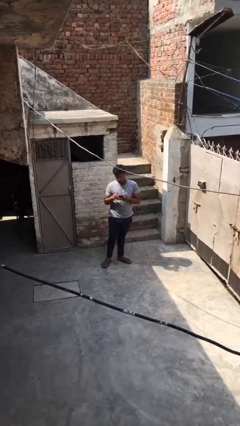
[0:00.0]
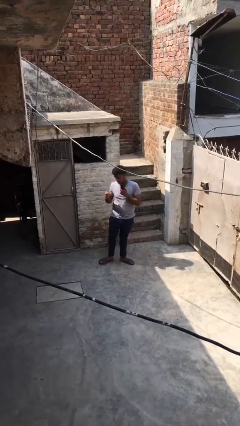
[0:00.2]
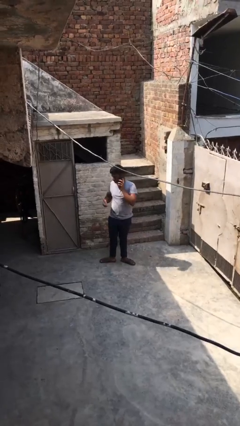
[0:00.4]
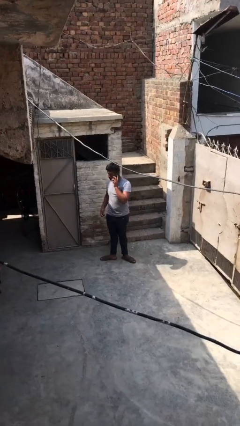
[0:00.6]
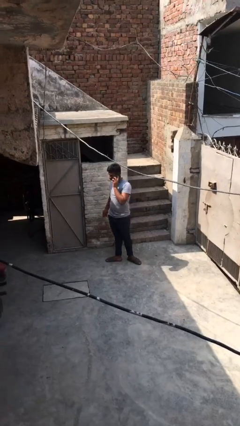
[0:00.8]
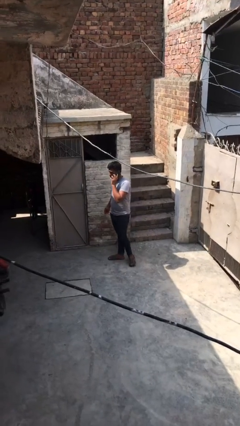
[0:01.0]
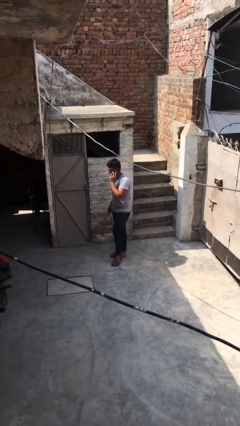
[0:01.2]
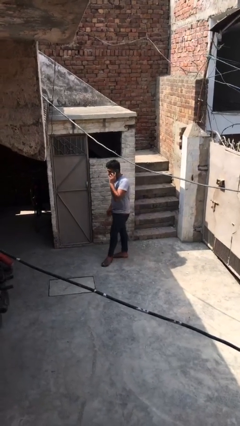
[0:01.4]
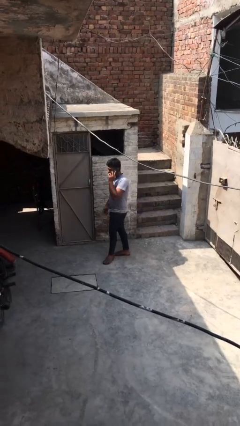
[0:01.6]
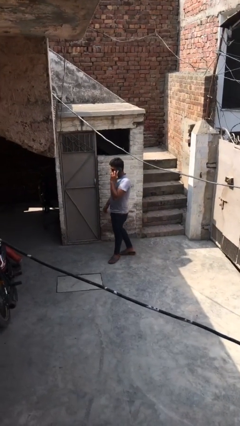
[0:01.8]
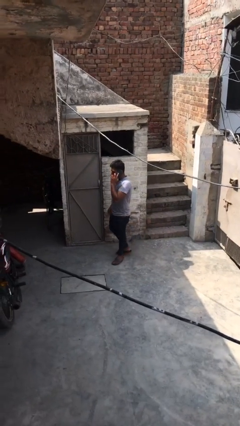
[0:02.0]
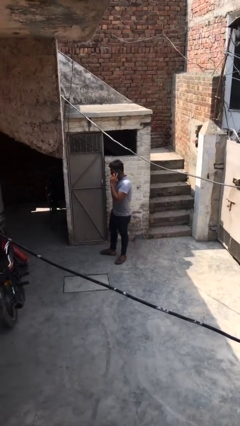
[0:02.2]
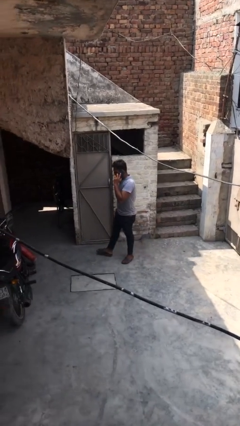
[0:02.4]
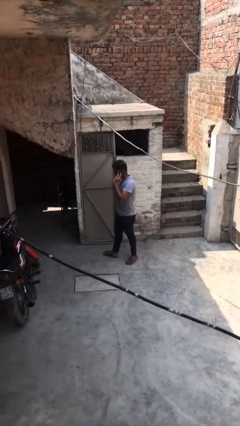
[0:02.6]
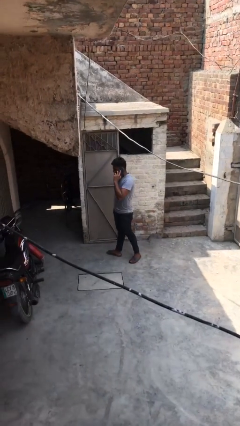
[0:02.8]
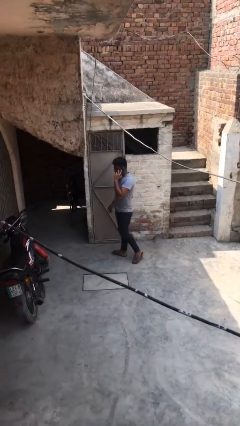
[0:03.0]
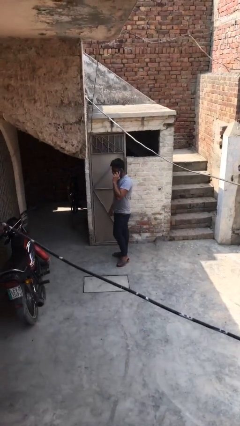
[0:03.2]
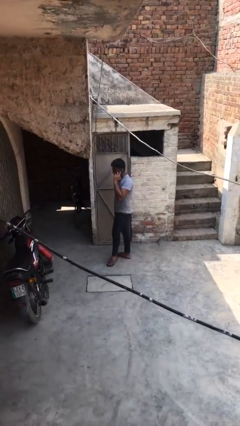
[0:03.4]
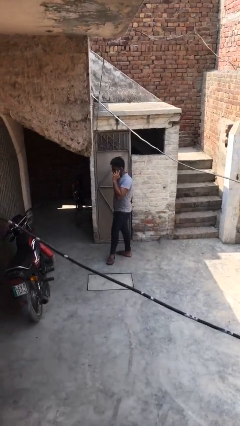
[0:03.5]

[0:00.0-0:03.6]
person talks on phone

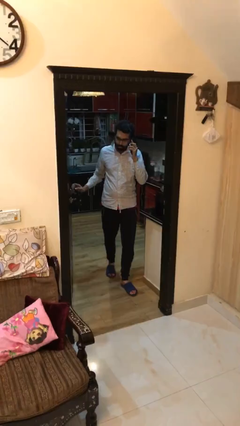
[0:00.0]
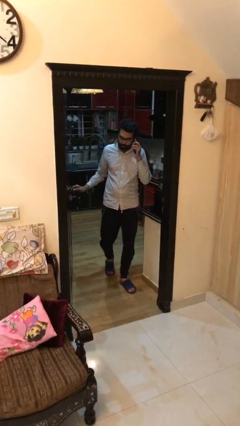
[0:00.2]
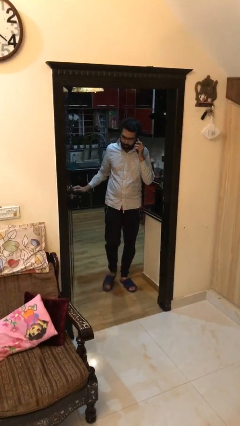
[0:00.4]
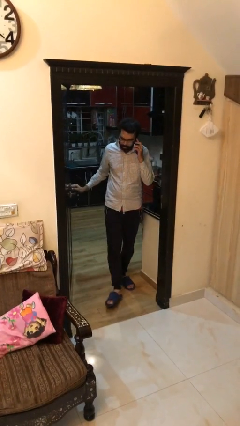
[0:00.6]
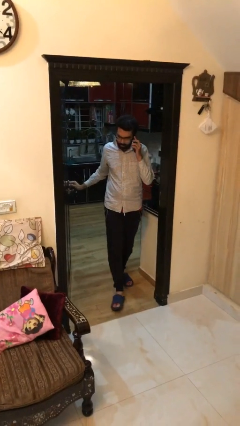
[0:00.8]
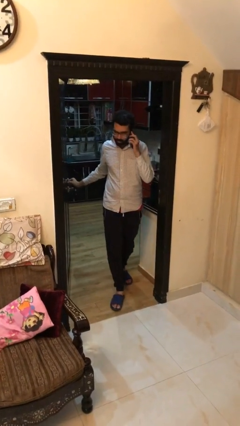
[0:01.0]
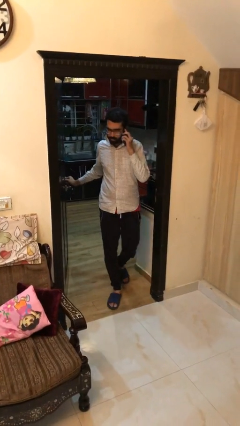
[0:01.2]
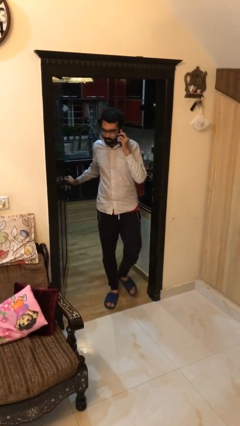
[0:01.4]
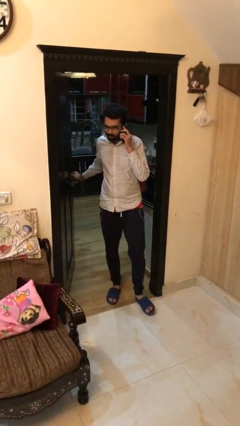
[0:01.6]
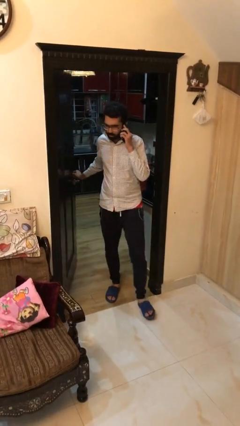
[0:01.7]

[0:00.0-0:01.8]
person enters scene through structure

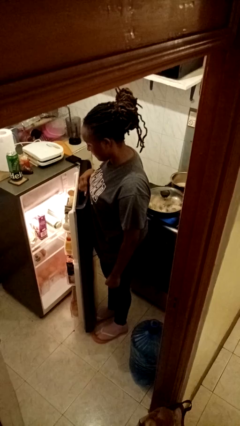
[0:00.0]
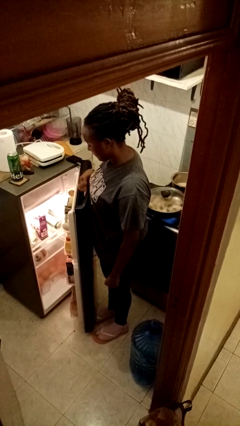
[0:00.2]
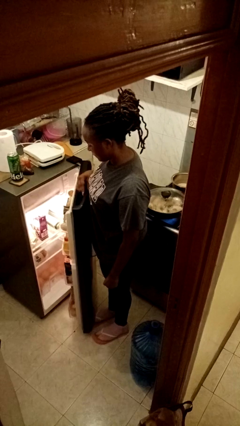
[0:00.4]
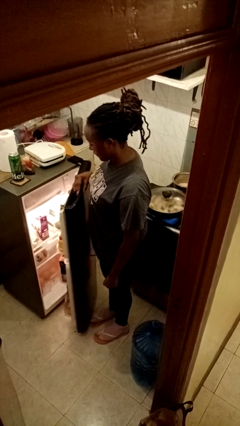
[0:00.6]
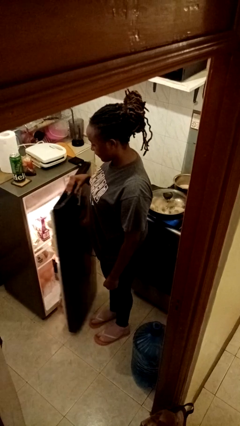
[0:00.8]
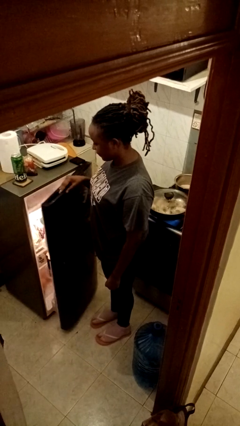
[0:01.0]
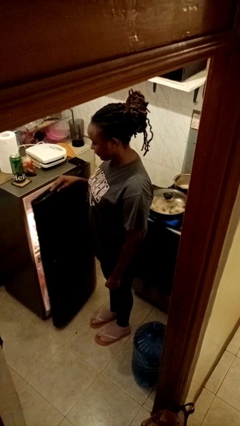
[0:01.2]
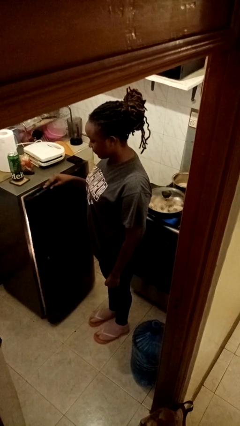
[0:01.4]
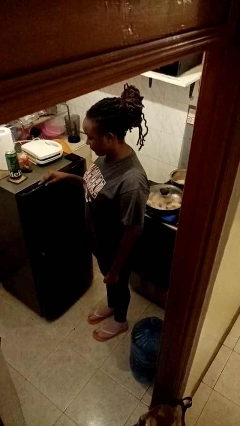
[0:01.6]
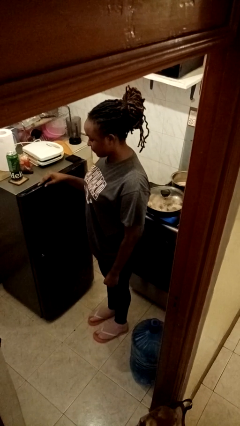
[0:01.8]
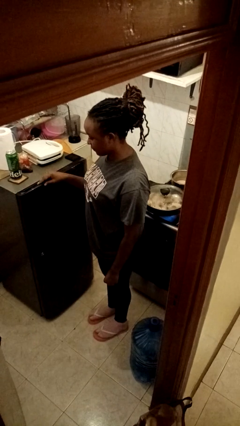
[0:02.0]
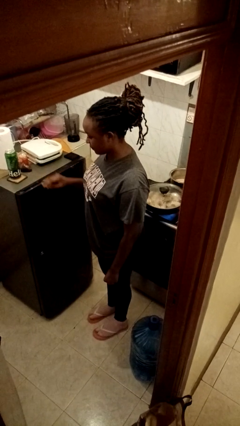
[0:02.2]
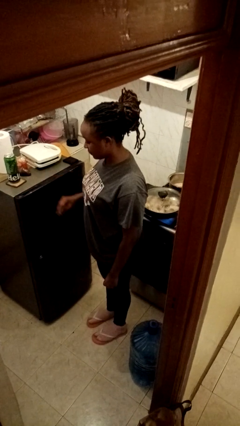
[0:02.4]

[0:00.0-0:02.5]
person closes refrigerator

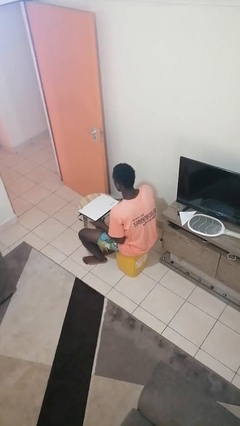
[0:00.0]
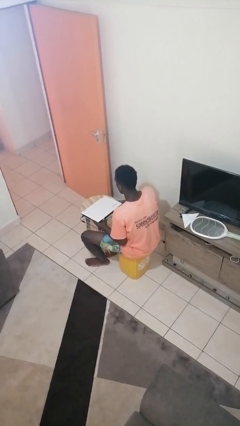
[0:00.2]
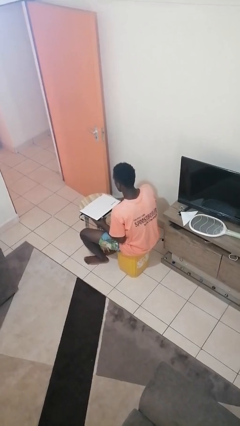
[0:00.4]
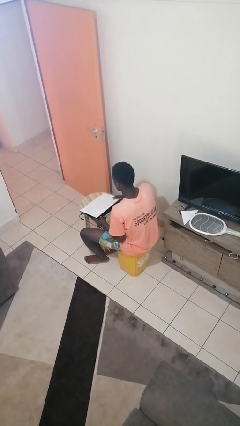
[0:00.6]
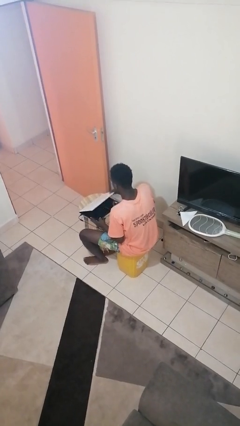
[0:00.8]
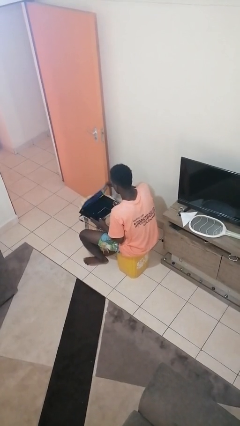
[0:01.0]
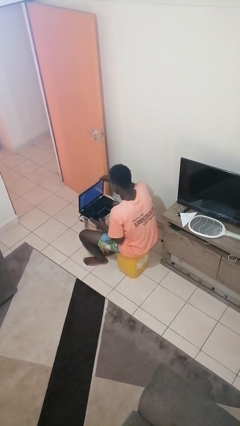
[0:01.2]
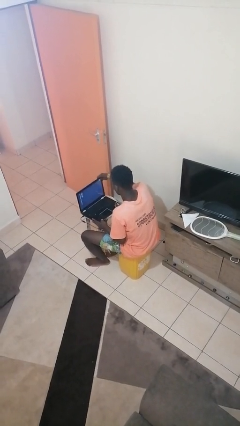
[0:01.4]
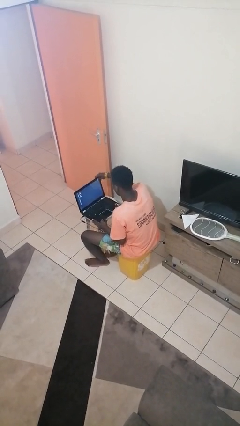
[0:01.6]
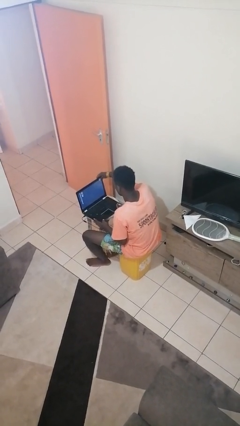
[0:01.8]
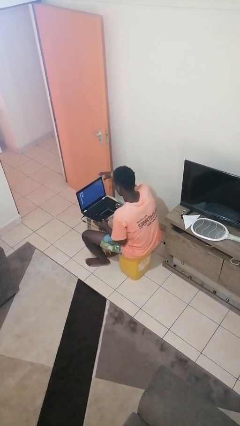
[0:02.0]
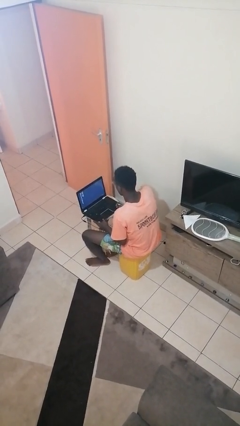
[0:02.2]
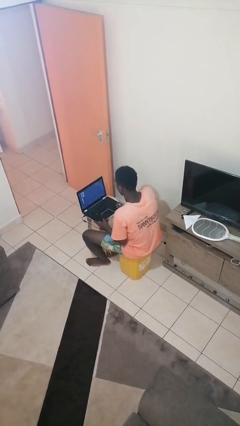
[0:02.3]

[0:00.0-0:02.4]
person opens laptop

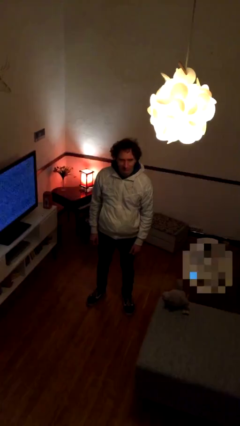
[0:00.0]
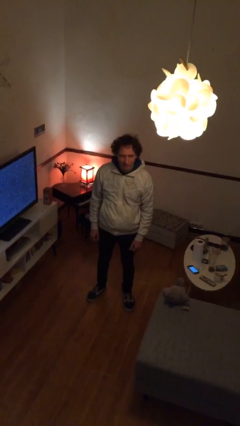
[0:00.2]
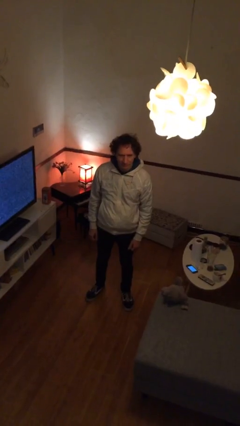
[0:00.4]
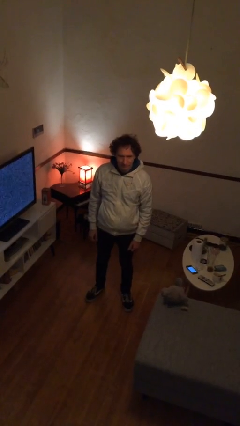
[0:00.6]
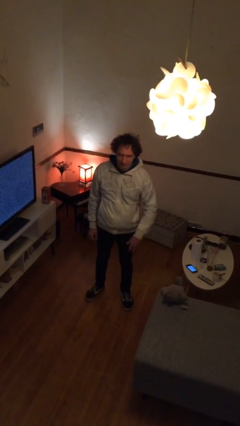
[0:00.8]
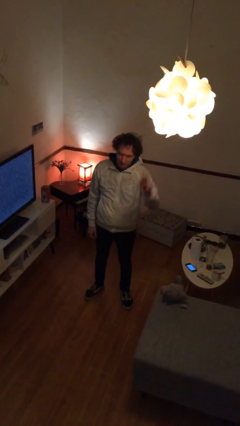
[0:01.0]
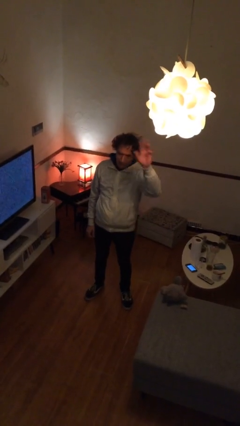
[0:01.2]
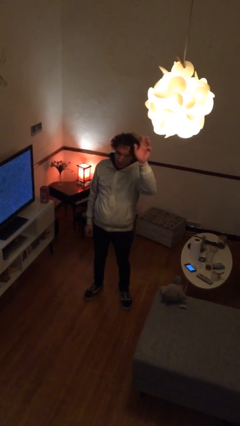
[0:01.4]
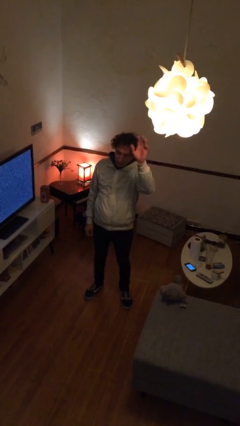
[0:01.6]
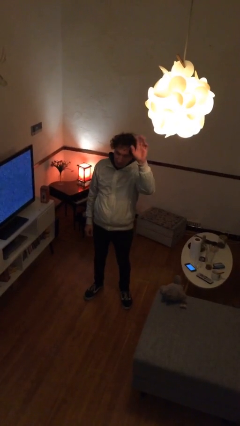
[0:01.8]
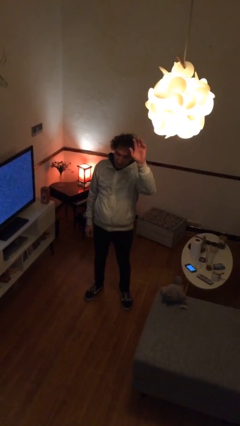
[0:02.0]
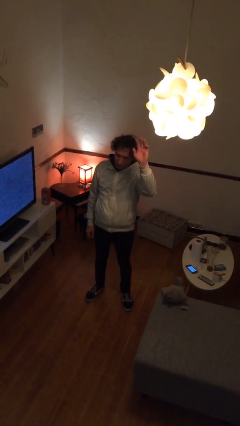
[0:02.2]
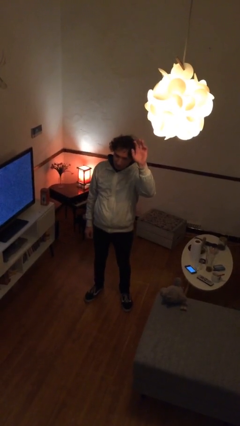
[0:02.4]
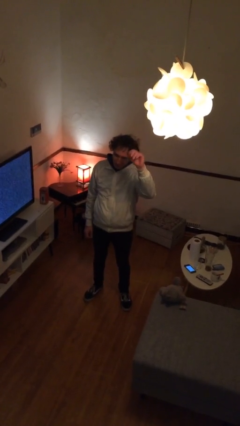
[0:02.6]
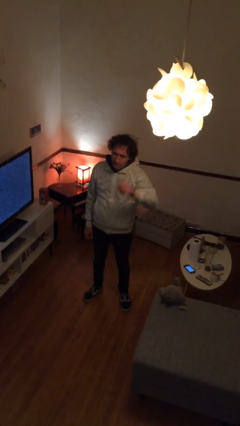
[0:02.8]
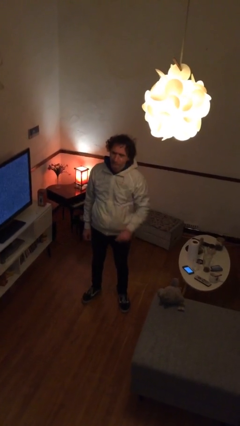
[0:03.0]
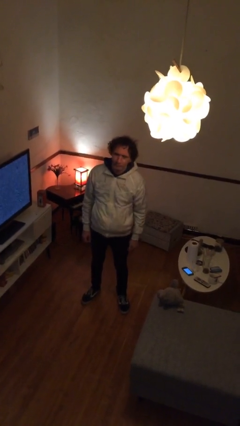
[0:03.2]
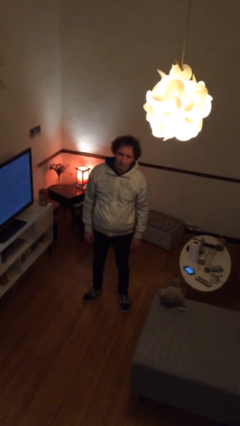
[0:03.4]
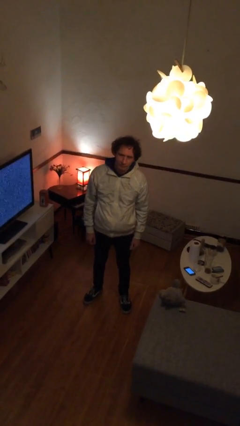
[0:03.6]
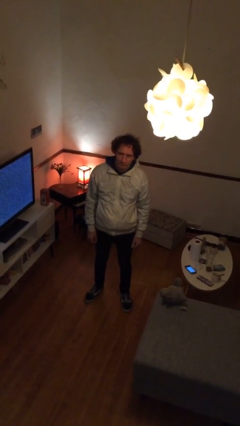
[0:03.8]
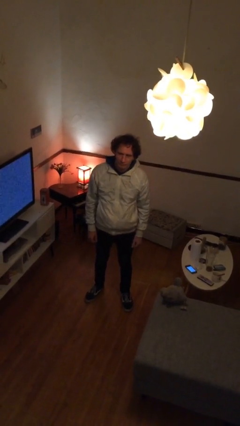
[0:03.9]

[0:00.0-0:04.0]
person waves at person

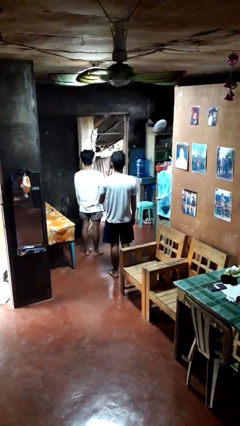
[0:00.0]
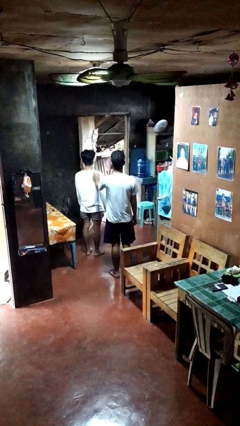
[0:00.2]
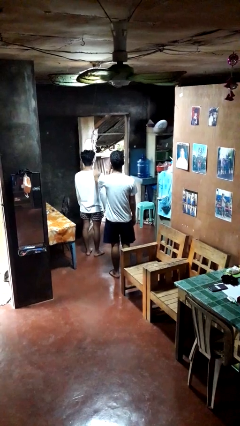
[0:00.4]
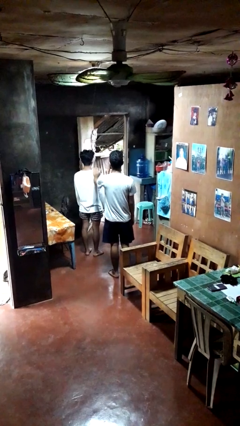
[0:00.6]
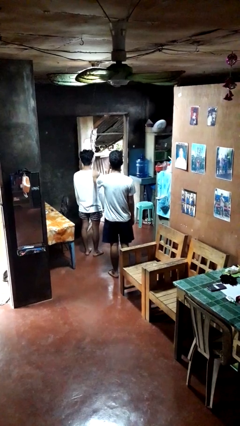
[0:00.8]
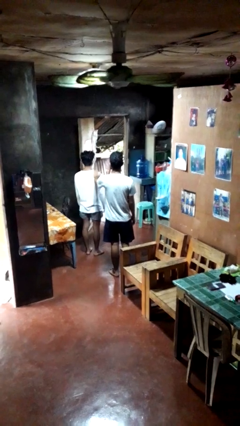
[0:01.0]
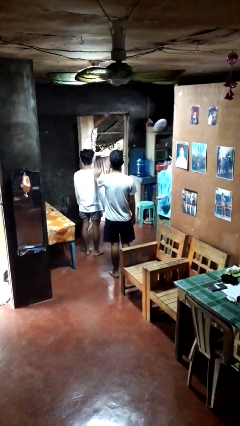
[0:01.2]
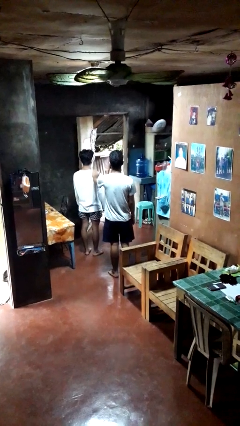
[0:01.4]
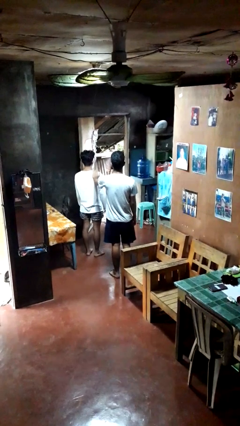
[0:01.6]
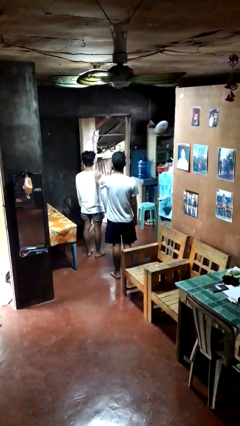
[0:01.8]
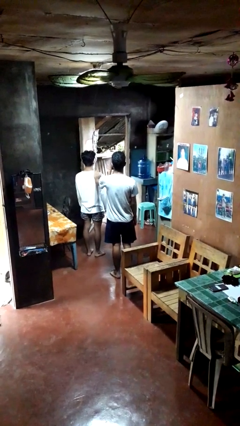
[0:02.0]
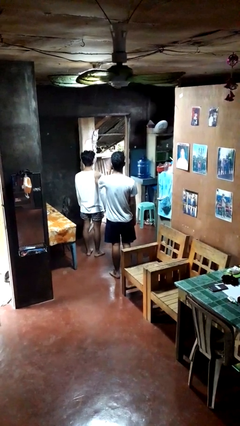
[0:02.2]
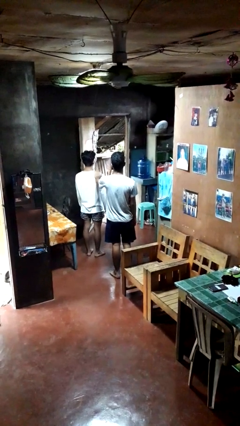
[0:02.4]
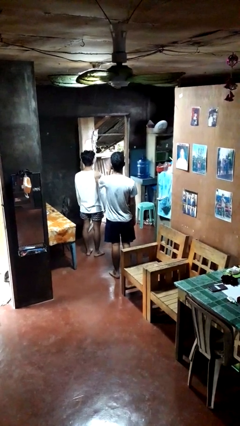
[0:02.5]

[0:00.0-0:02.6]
person pounds shoulders of person

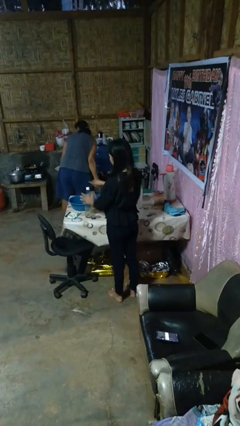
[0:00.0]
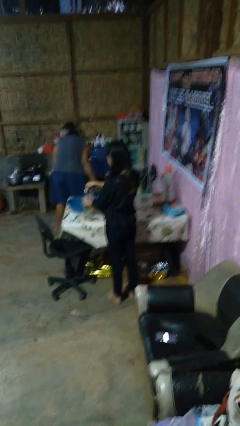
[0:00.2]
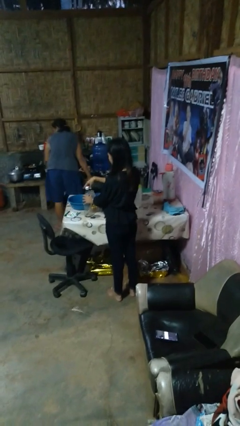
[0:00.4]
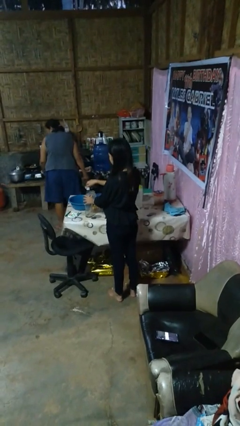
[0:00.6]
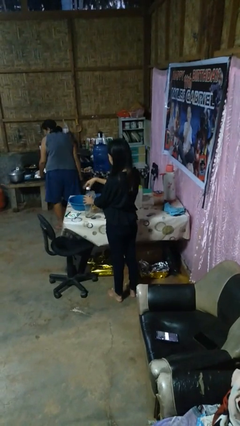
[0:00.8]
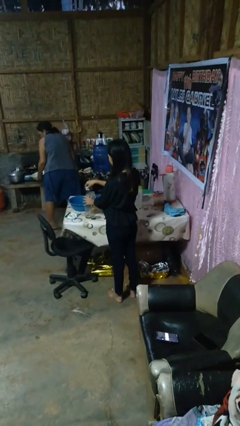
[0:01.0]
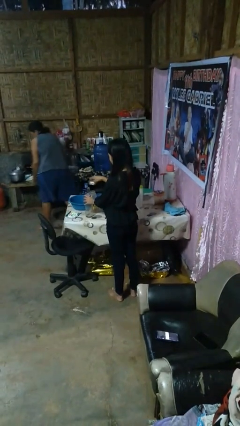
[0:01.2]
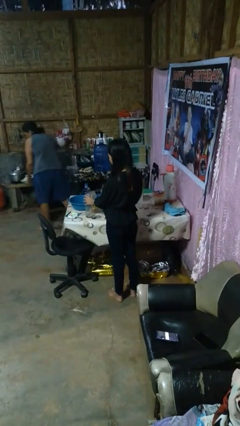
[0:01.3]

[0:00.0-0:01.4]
person unscrews lid from bottle
